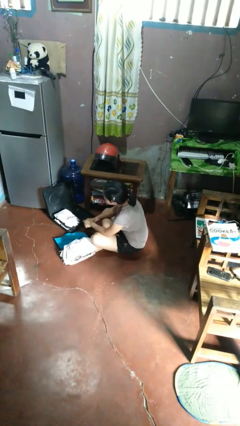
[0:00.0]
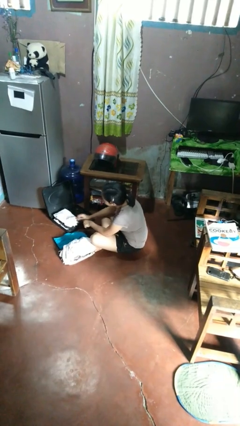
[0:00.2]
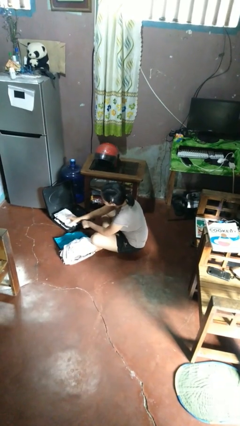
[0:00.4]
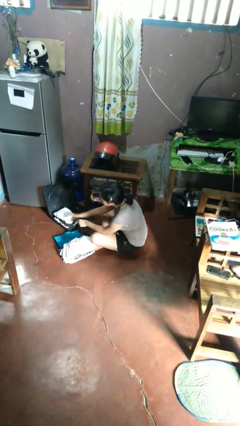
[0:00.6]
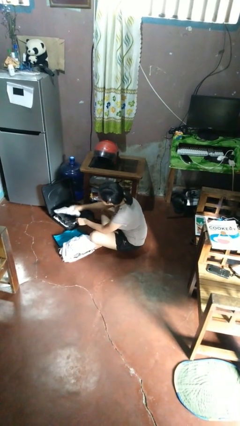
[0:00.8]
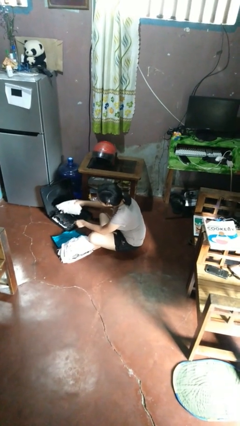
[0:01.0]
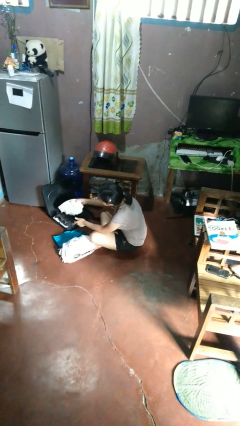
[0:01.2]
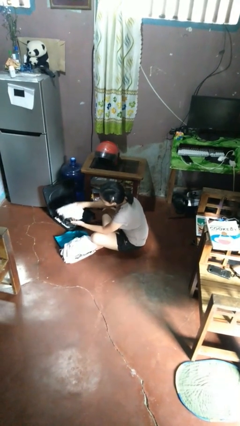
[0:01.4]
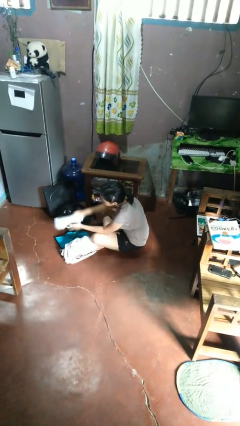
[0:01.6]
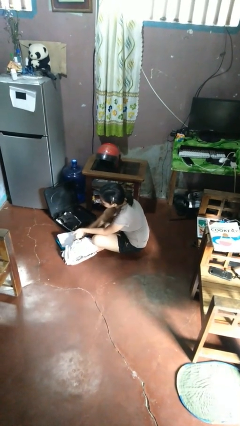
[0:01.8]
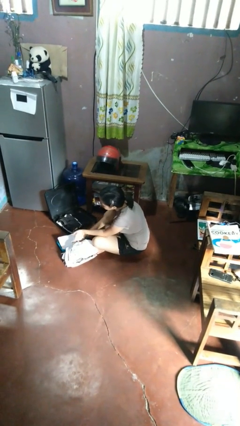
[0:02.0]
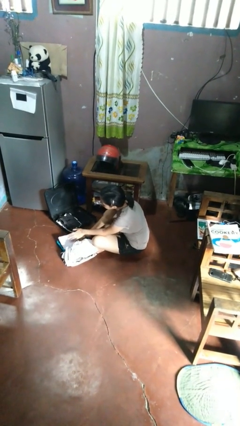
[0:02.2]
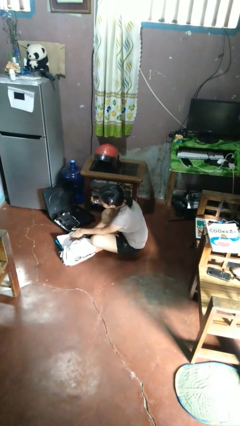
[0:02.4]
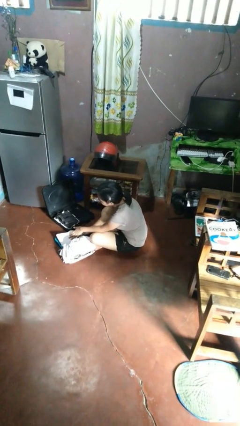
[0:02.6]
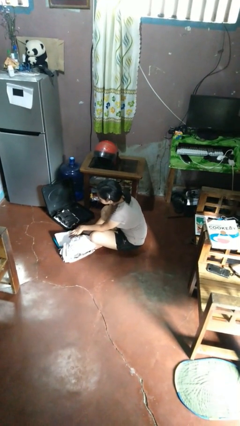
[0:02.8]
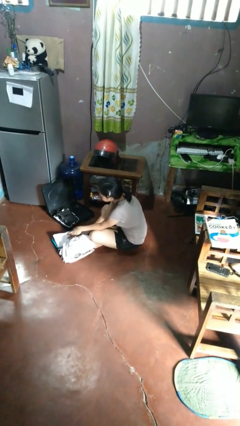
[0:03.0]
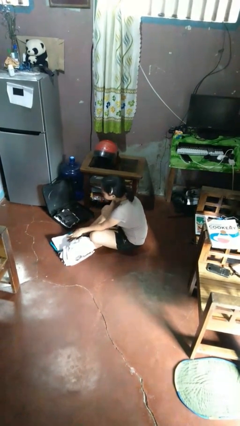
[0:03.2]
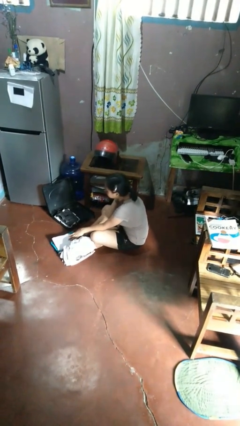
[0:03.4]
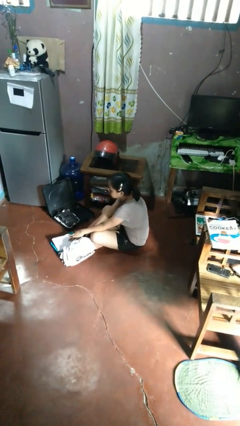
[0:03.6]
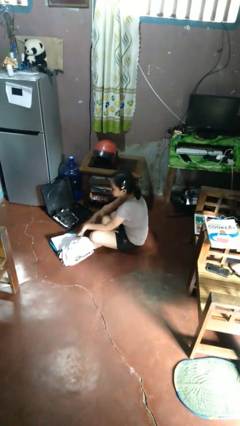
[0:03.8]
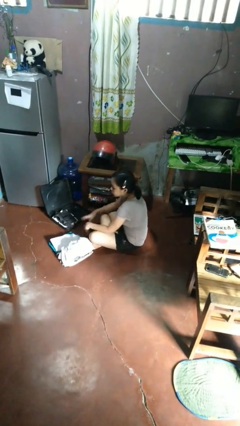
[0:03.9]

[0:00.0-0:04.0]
person unloads clothes from suitcase

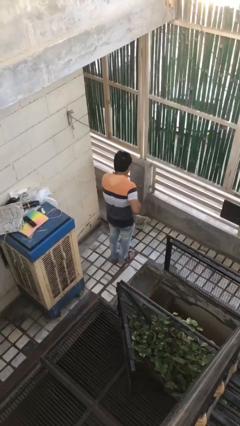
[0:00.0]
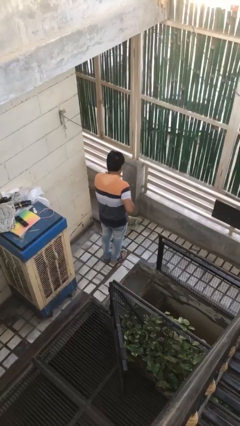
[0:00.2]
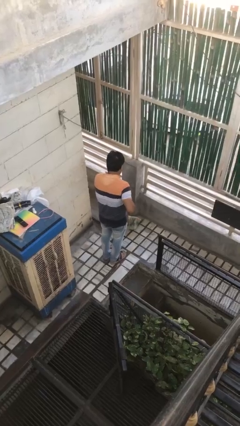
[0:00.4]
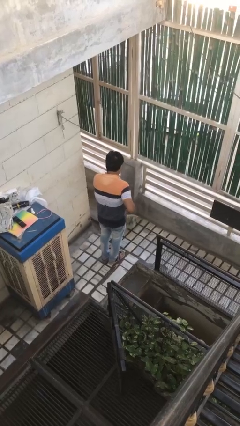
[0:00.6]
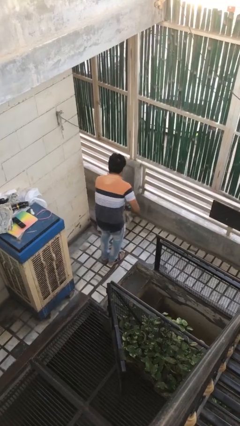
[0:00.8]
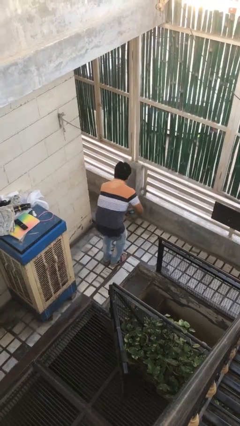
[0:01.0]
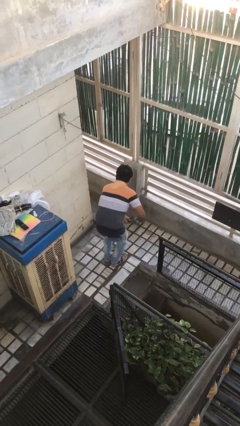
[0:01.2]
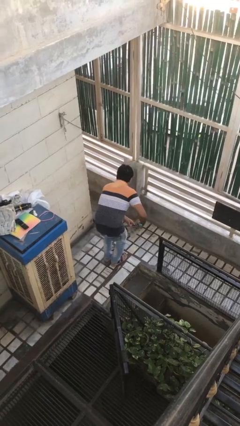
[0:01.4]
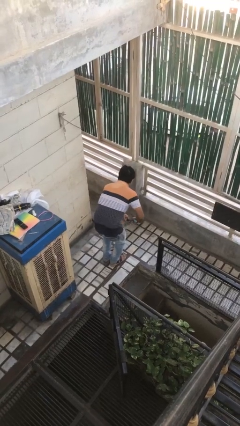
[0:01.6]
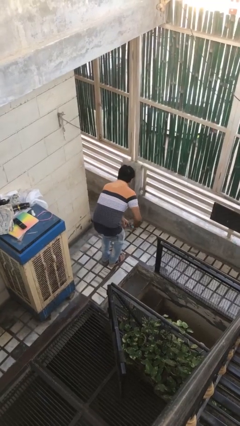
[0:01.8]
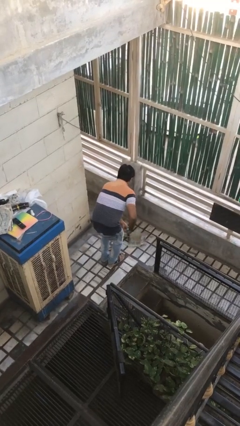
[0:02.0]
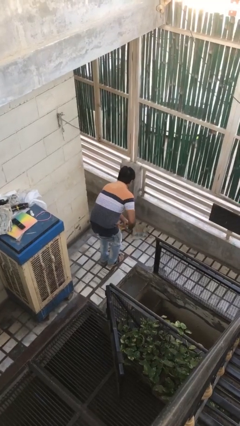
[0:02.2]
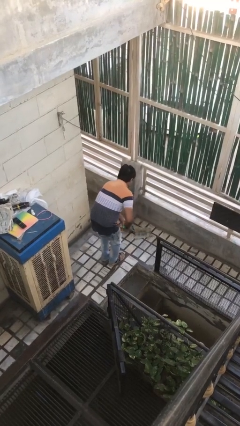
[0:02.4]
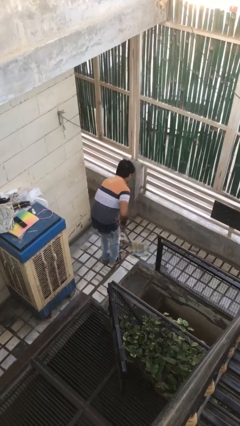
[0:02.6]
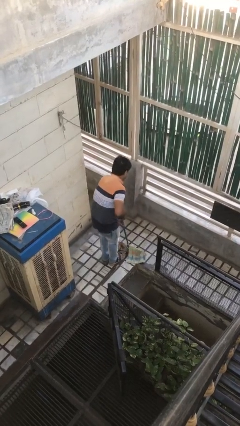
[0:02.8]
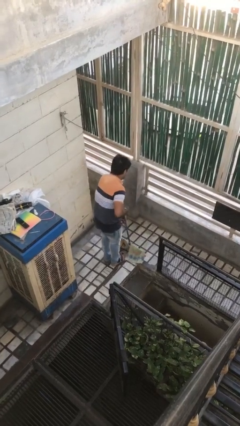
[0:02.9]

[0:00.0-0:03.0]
person mops

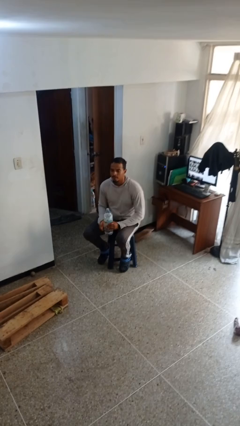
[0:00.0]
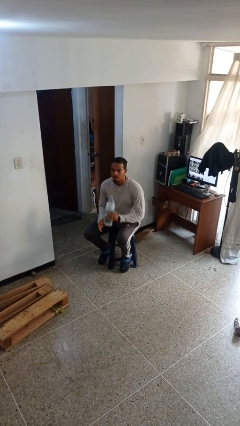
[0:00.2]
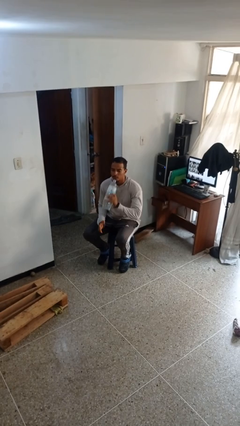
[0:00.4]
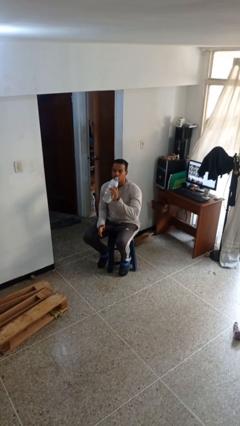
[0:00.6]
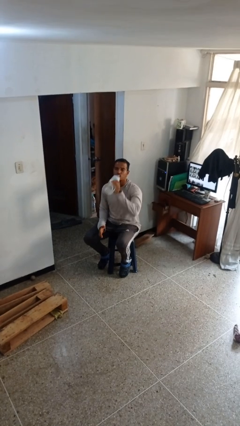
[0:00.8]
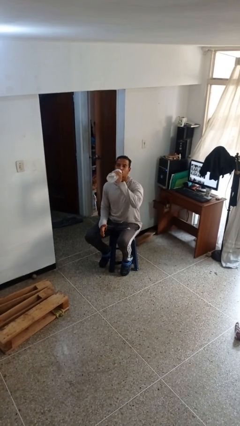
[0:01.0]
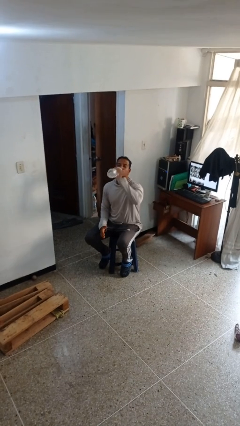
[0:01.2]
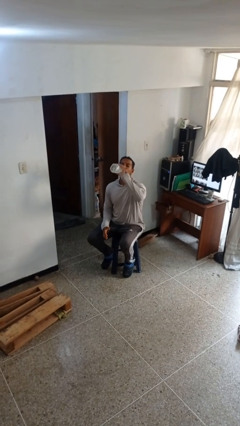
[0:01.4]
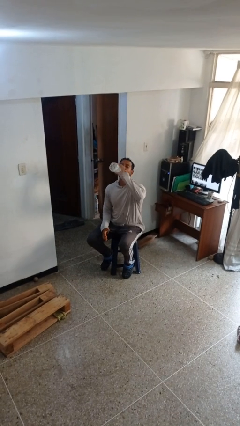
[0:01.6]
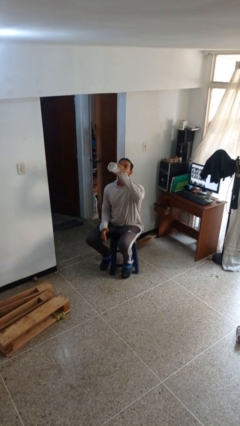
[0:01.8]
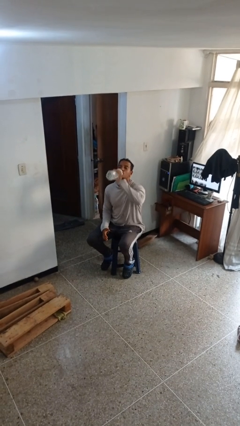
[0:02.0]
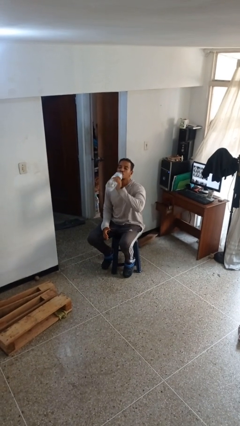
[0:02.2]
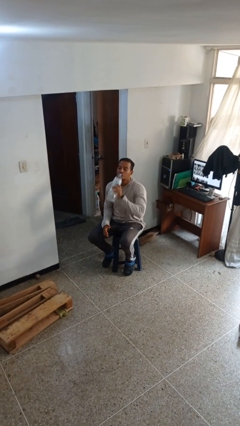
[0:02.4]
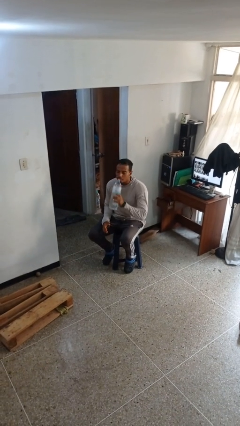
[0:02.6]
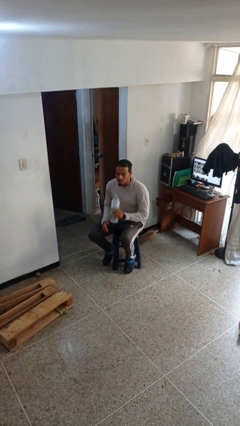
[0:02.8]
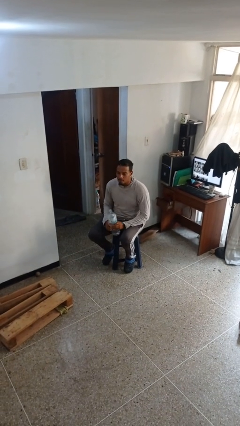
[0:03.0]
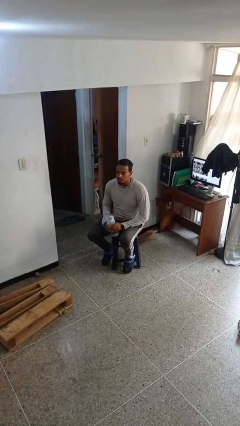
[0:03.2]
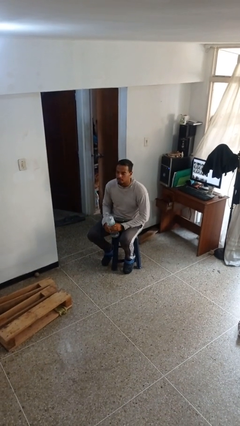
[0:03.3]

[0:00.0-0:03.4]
person drinks from bottle

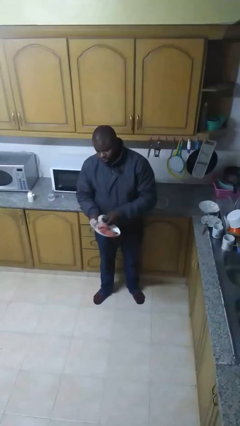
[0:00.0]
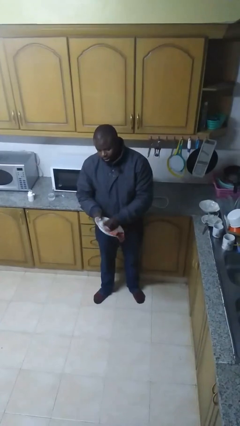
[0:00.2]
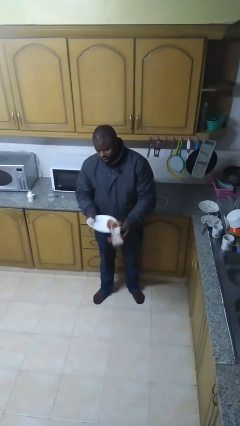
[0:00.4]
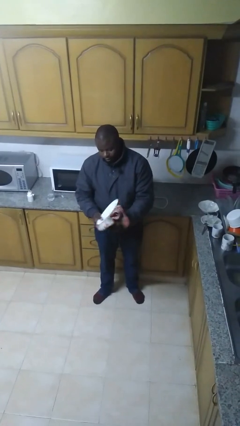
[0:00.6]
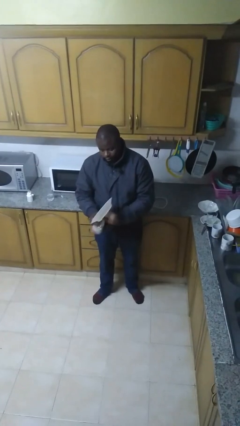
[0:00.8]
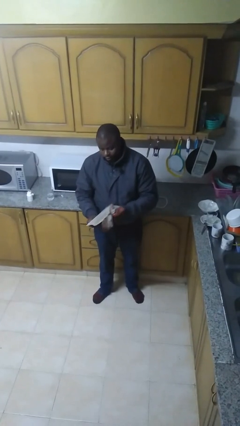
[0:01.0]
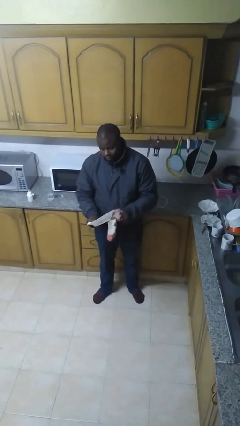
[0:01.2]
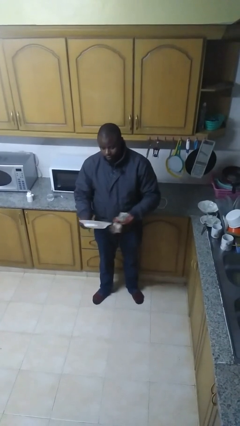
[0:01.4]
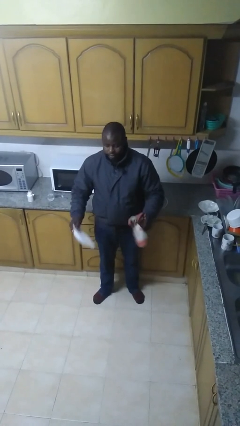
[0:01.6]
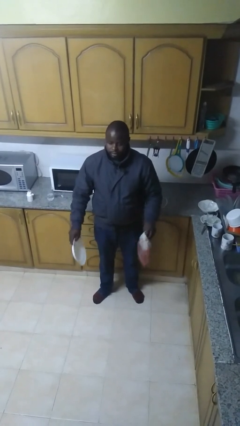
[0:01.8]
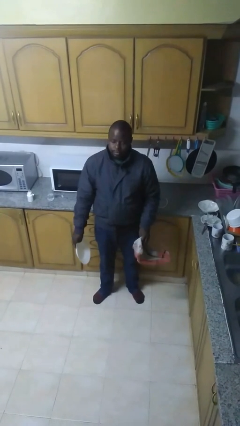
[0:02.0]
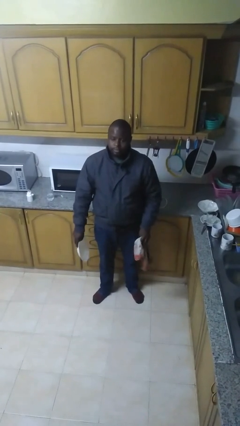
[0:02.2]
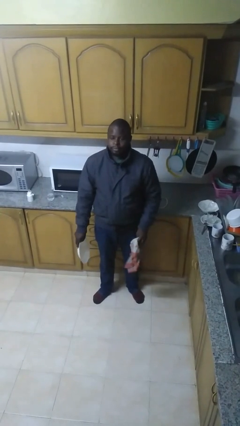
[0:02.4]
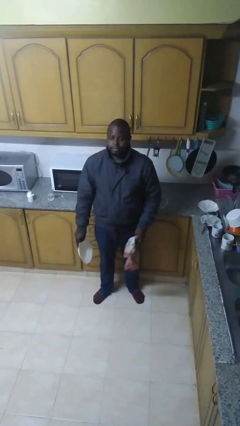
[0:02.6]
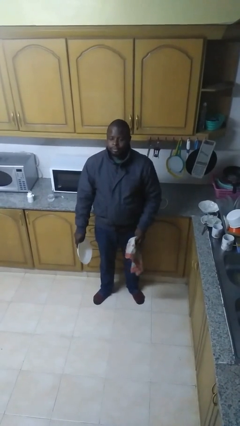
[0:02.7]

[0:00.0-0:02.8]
person dries dish

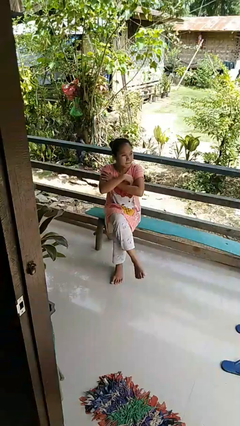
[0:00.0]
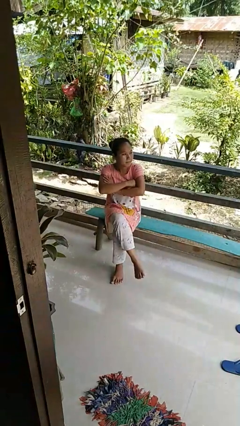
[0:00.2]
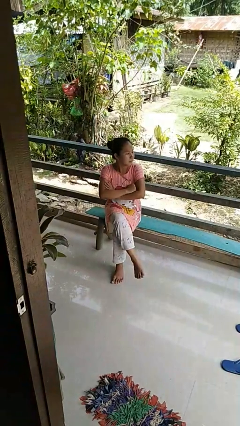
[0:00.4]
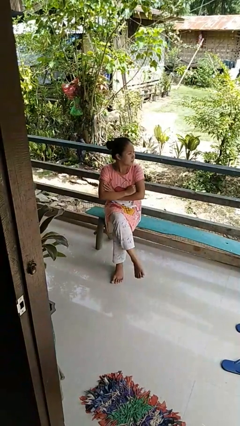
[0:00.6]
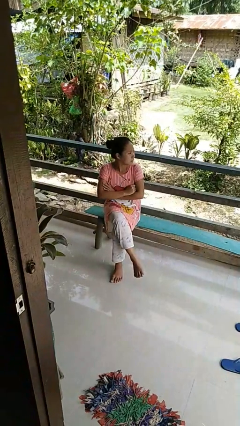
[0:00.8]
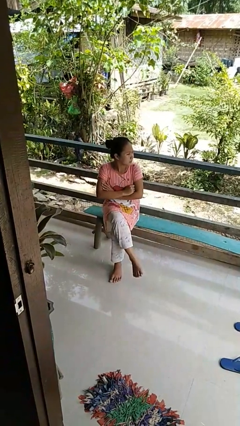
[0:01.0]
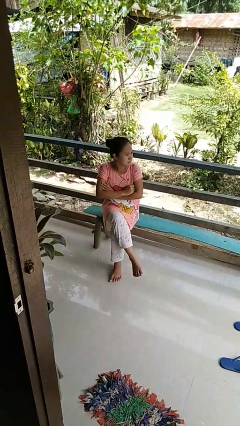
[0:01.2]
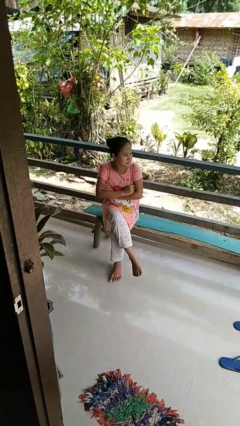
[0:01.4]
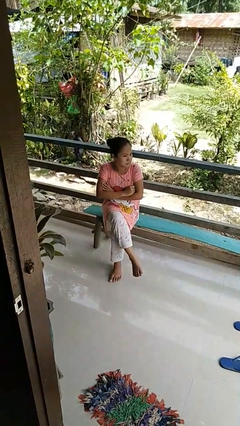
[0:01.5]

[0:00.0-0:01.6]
person crosses arms

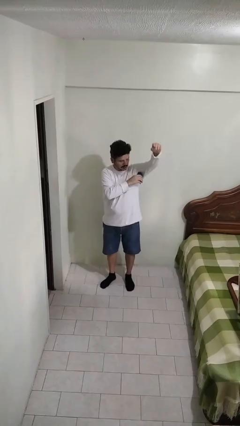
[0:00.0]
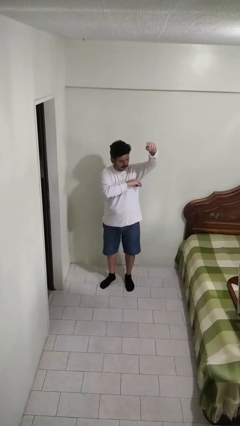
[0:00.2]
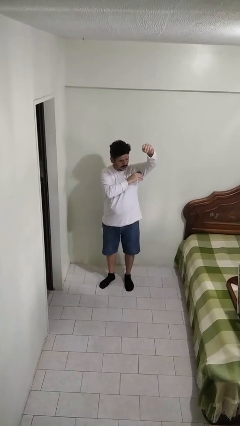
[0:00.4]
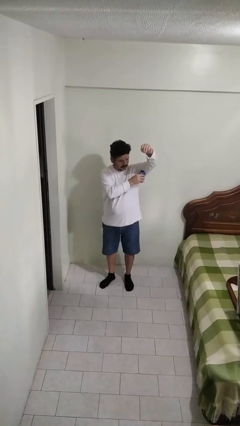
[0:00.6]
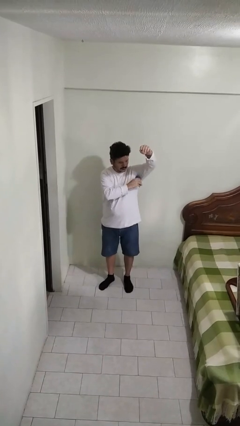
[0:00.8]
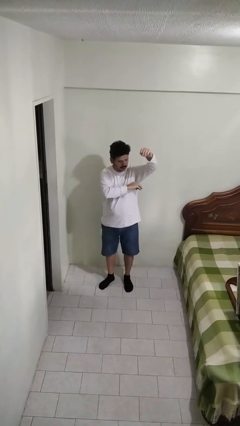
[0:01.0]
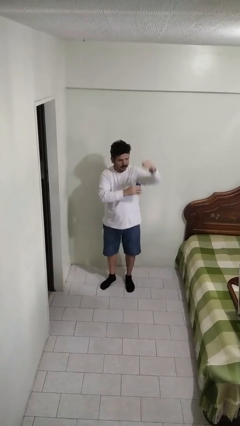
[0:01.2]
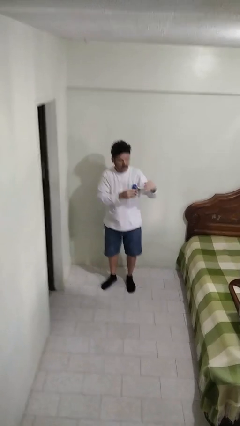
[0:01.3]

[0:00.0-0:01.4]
person applies deodorant

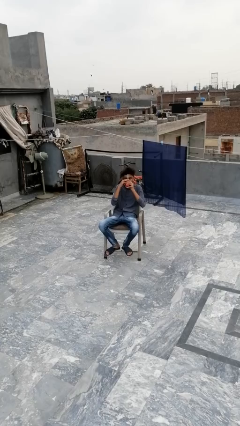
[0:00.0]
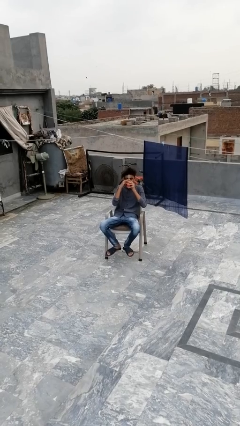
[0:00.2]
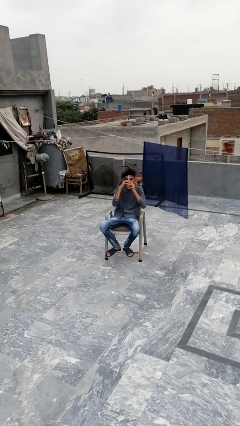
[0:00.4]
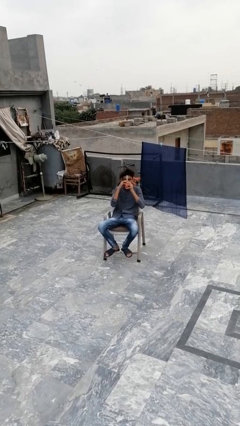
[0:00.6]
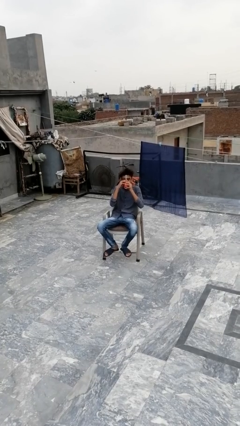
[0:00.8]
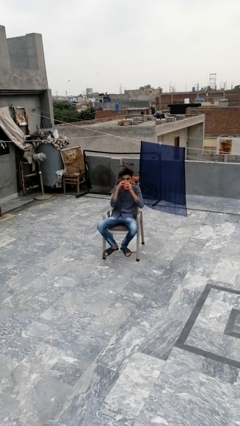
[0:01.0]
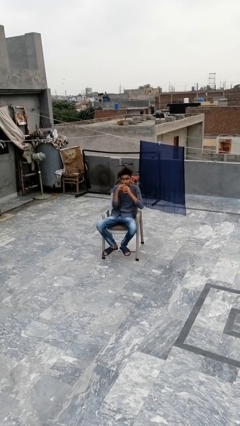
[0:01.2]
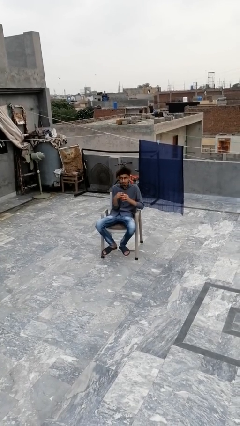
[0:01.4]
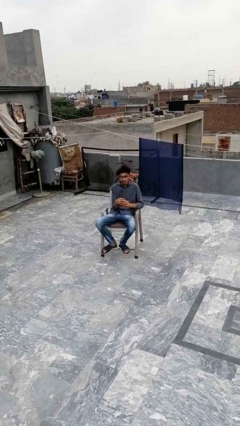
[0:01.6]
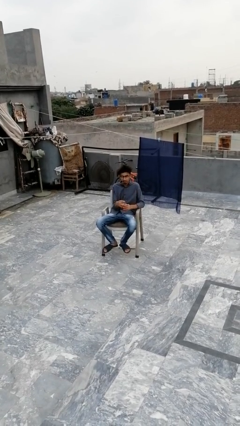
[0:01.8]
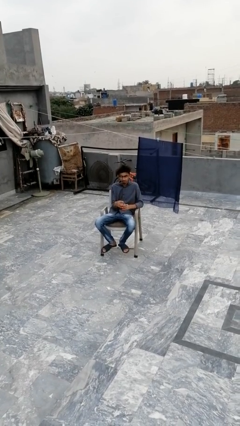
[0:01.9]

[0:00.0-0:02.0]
person drinks from mug
